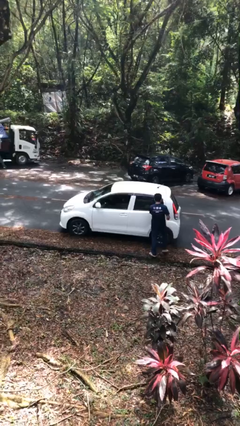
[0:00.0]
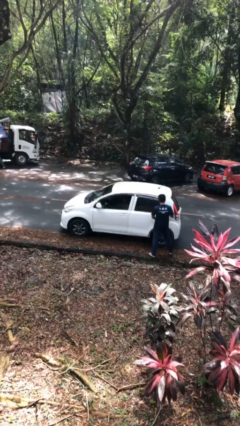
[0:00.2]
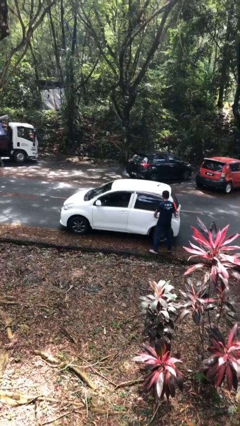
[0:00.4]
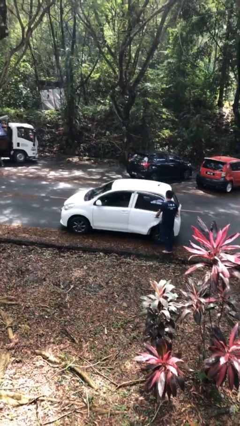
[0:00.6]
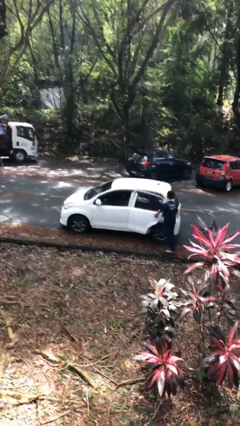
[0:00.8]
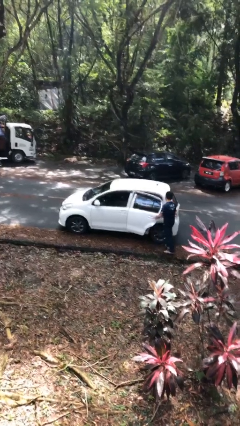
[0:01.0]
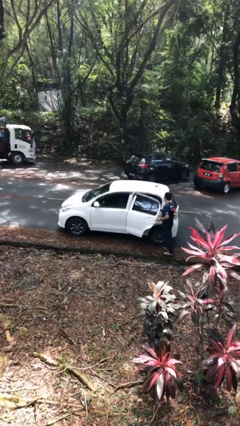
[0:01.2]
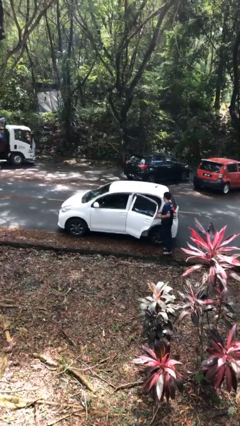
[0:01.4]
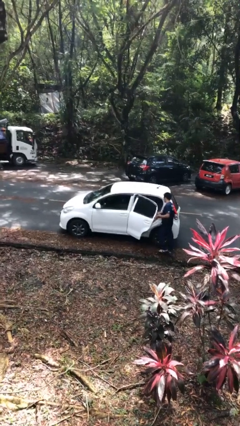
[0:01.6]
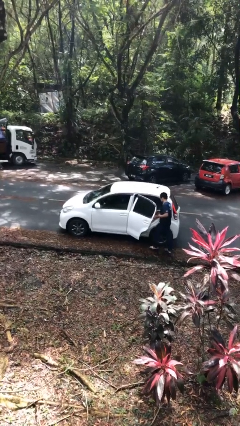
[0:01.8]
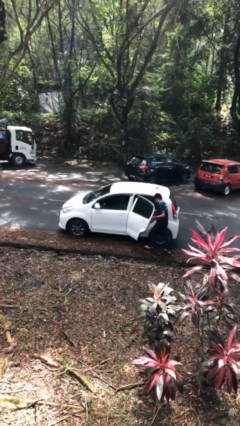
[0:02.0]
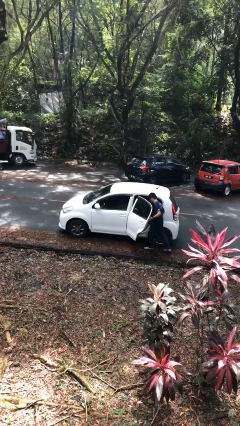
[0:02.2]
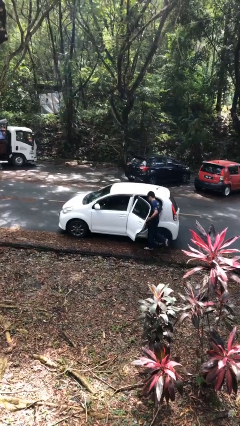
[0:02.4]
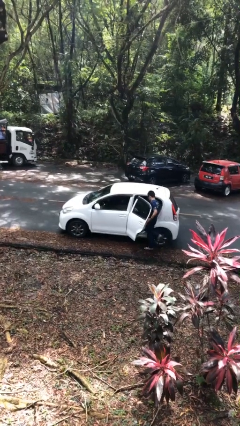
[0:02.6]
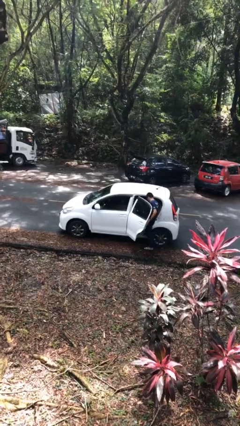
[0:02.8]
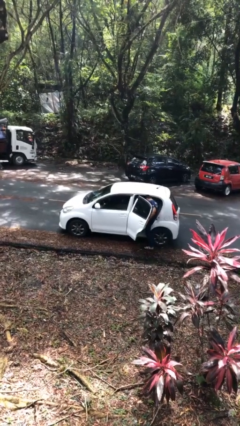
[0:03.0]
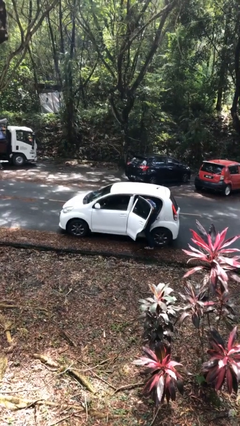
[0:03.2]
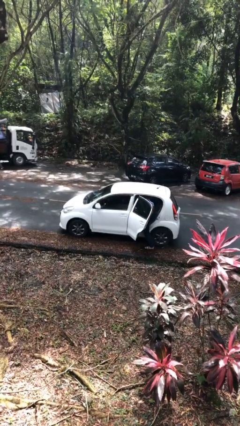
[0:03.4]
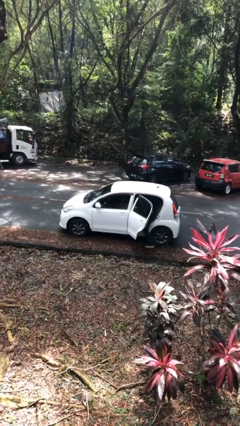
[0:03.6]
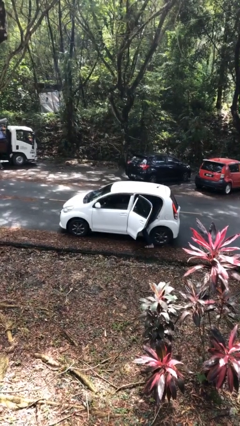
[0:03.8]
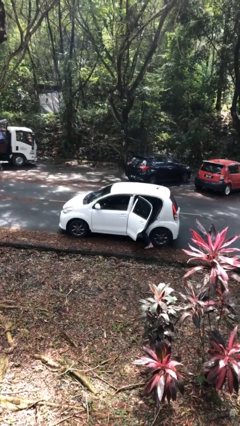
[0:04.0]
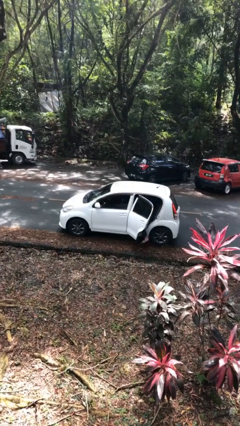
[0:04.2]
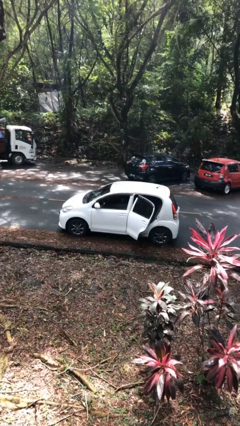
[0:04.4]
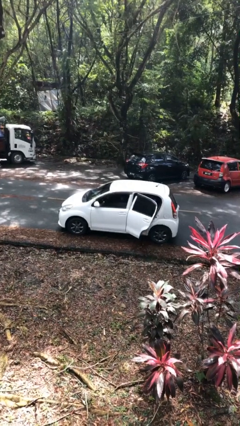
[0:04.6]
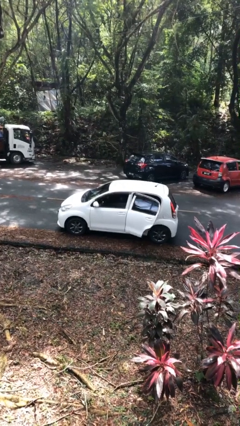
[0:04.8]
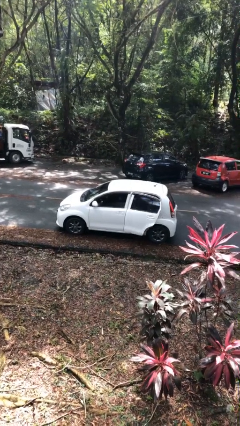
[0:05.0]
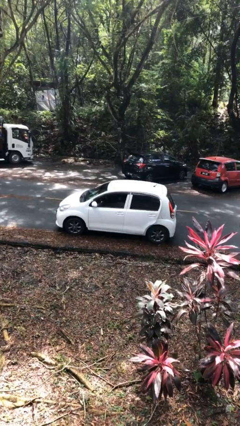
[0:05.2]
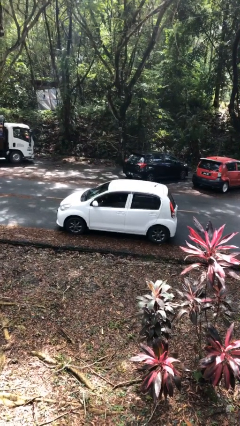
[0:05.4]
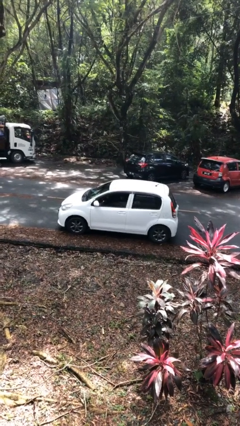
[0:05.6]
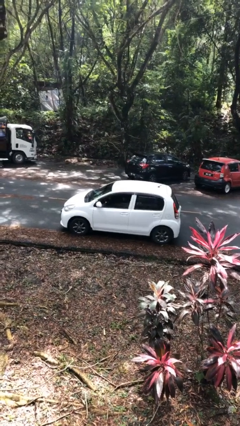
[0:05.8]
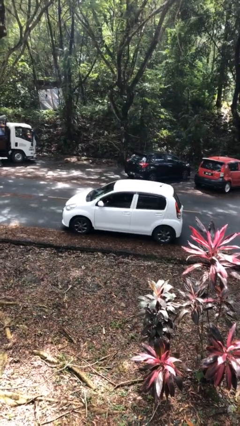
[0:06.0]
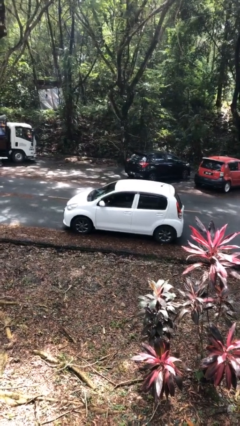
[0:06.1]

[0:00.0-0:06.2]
car picks up person

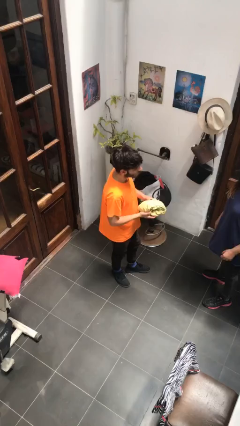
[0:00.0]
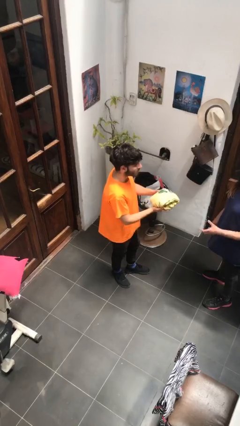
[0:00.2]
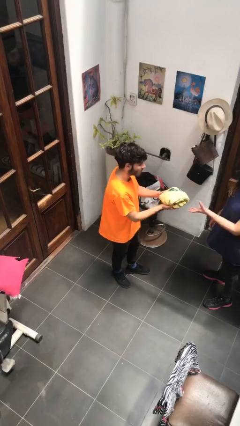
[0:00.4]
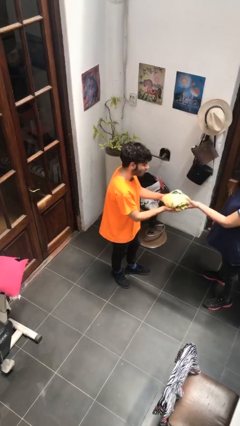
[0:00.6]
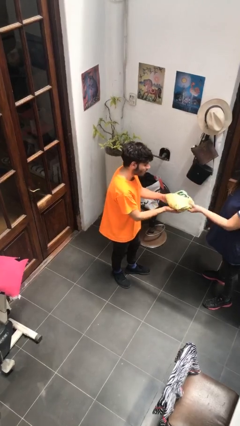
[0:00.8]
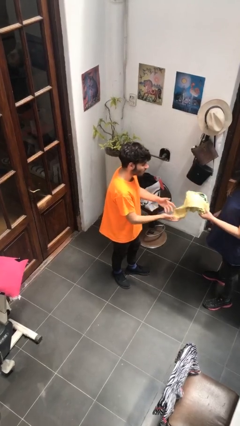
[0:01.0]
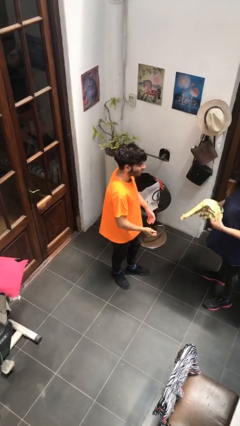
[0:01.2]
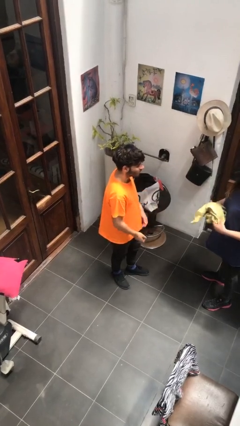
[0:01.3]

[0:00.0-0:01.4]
person transfers object to person

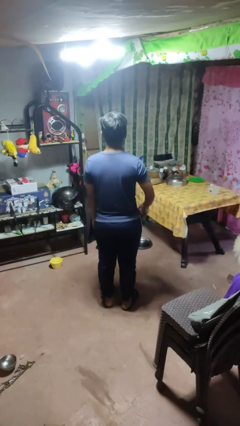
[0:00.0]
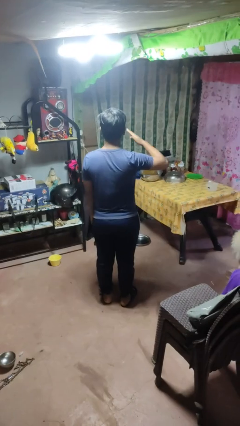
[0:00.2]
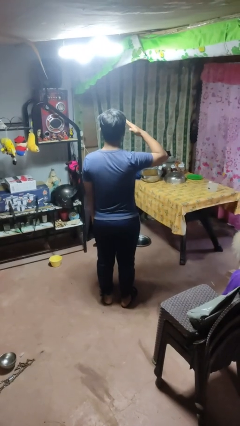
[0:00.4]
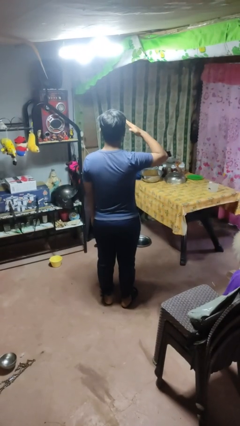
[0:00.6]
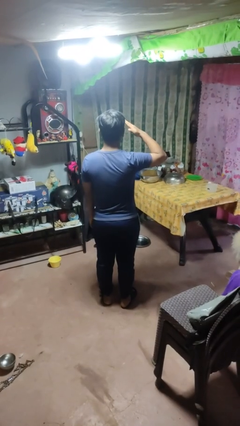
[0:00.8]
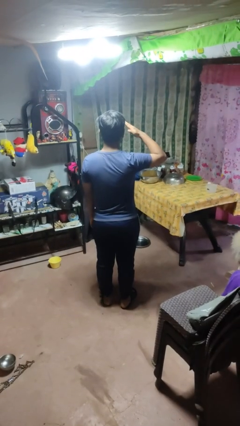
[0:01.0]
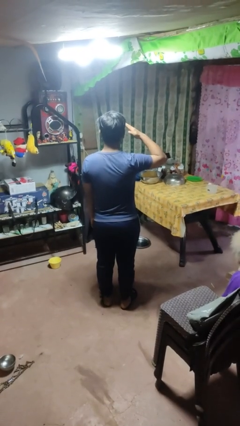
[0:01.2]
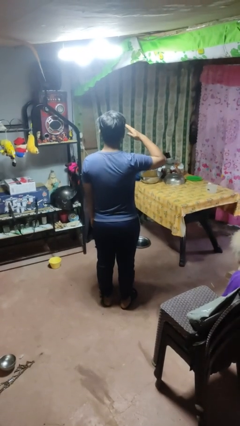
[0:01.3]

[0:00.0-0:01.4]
person salutes

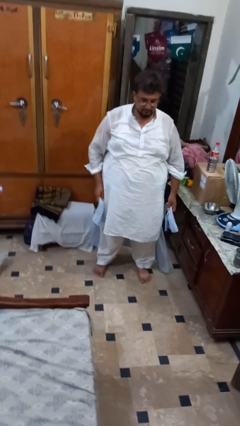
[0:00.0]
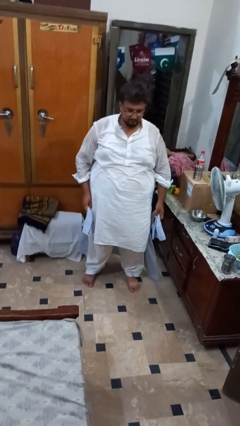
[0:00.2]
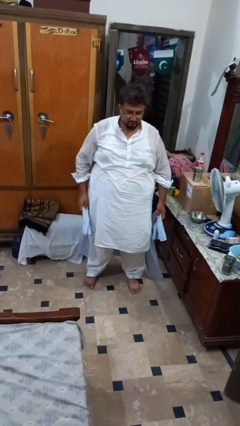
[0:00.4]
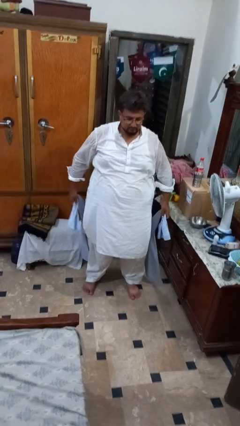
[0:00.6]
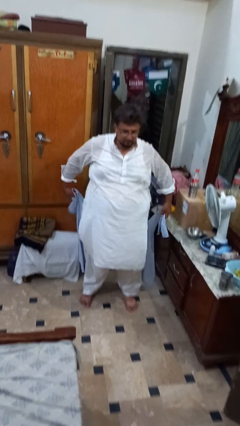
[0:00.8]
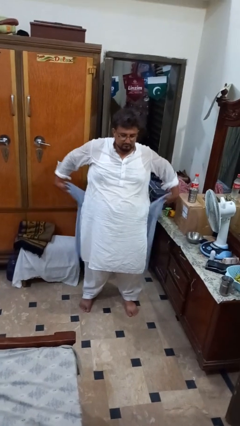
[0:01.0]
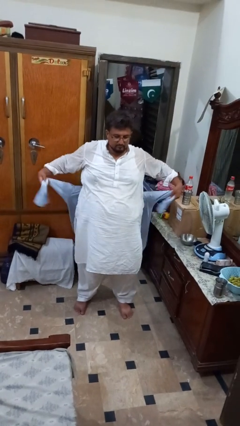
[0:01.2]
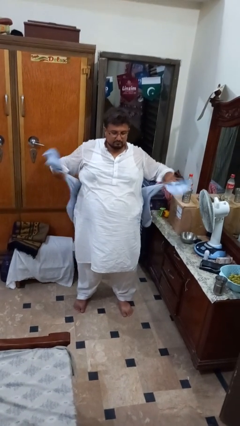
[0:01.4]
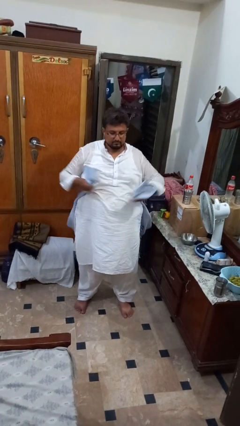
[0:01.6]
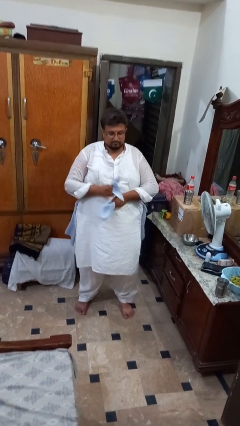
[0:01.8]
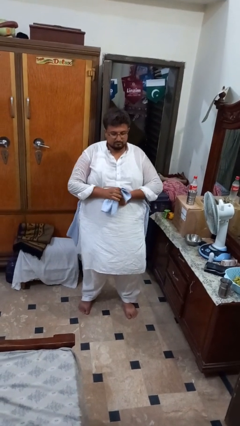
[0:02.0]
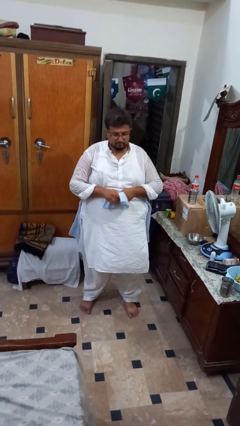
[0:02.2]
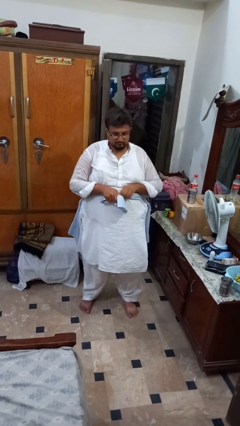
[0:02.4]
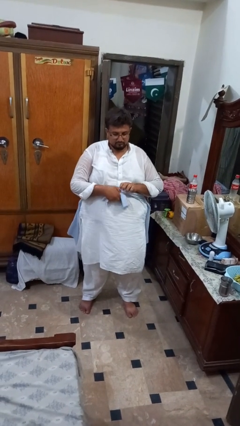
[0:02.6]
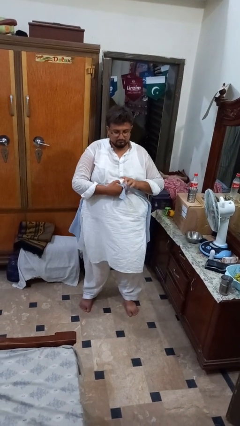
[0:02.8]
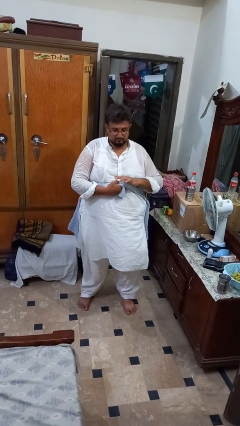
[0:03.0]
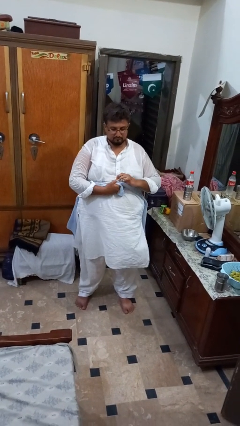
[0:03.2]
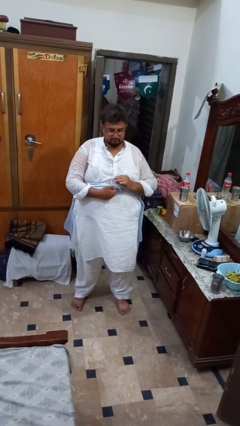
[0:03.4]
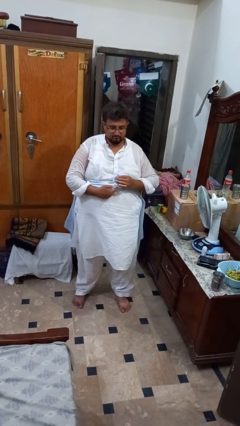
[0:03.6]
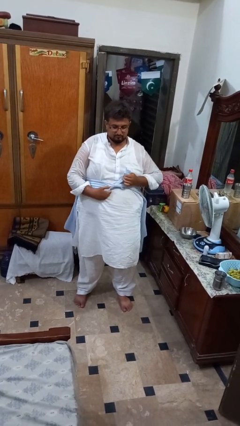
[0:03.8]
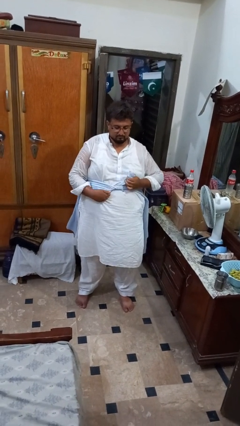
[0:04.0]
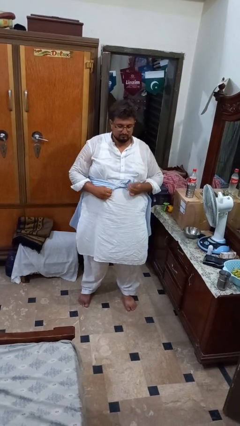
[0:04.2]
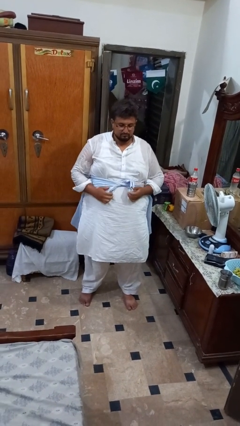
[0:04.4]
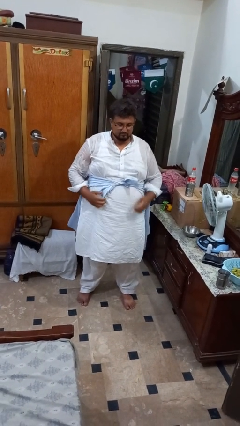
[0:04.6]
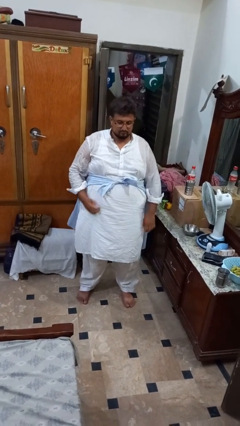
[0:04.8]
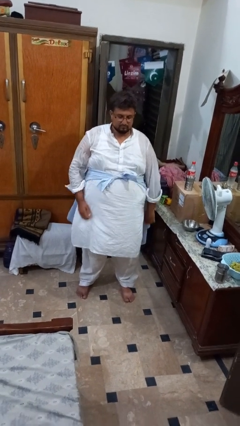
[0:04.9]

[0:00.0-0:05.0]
person ties jacket around waist

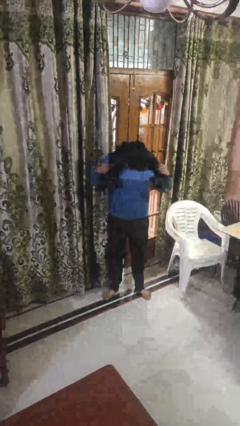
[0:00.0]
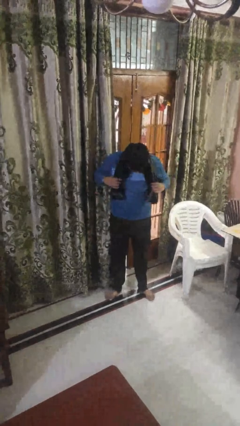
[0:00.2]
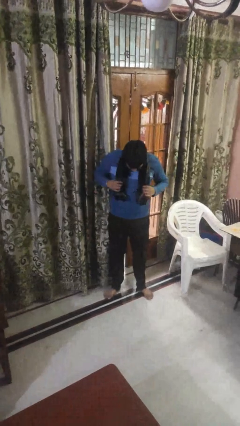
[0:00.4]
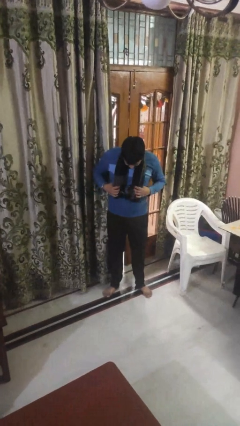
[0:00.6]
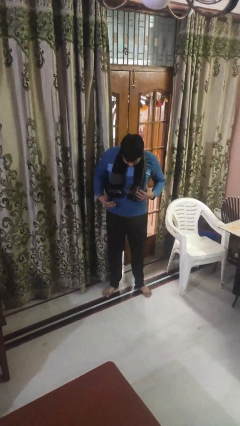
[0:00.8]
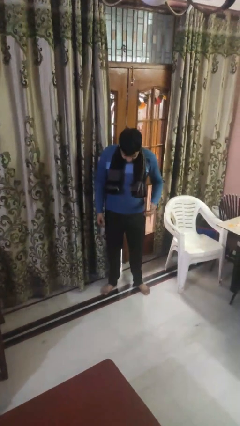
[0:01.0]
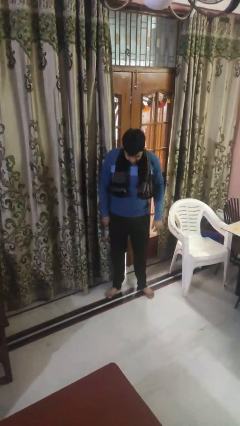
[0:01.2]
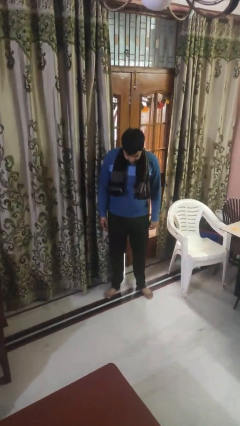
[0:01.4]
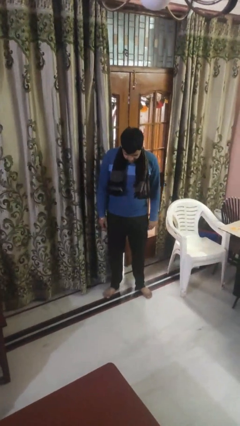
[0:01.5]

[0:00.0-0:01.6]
person puts on scarf

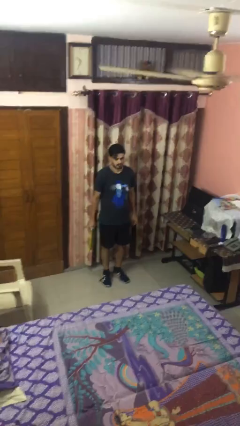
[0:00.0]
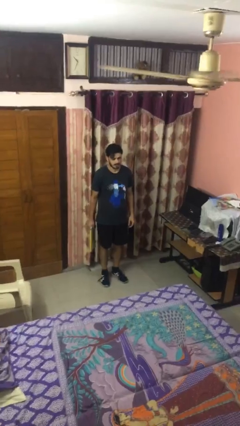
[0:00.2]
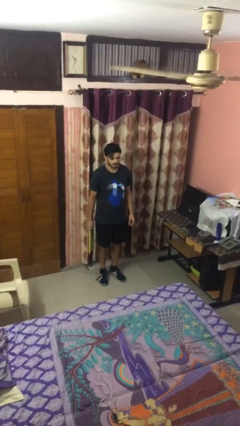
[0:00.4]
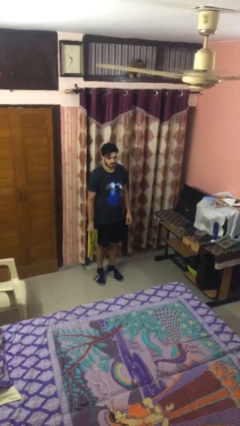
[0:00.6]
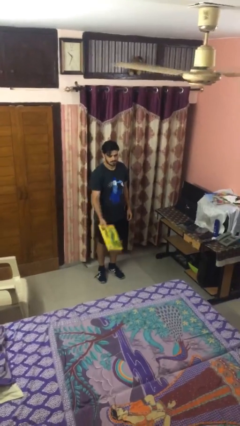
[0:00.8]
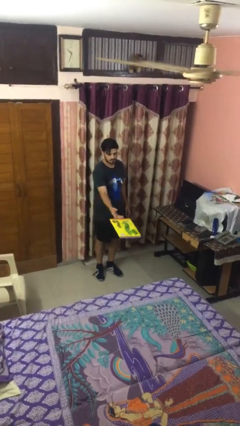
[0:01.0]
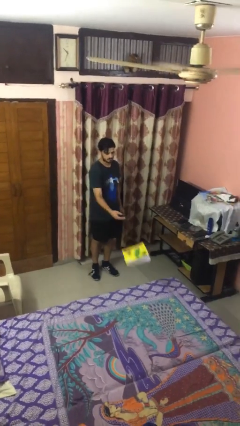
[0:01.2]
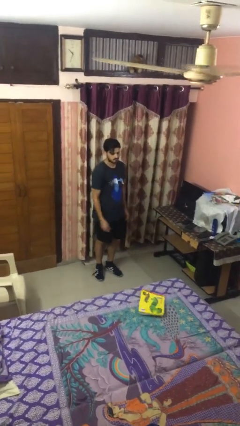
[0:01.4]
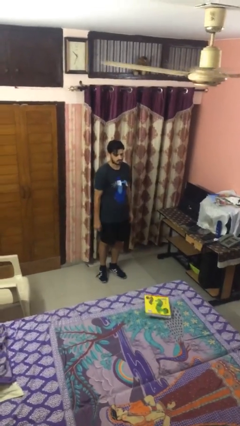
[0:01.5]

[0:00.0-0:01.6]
person throws object on bed
